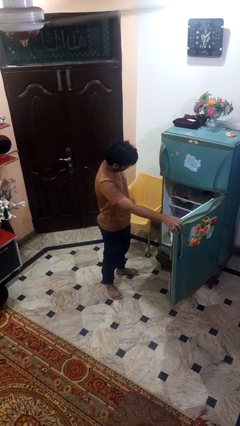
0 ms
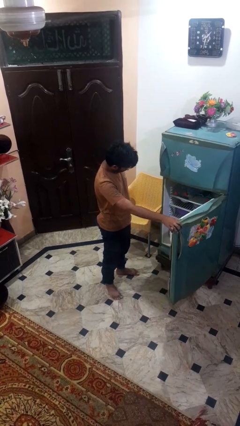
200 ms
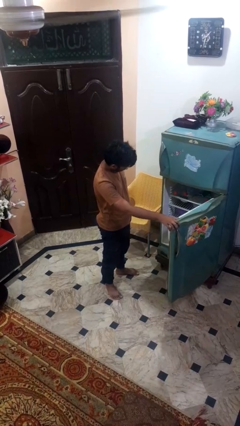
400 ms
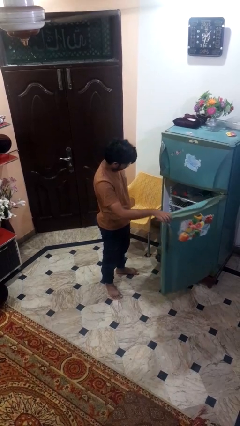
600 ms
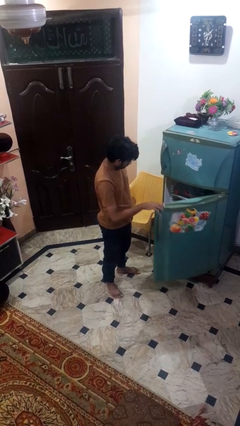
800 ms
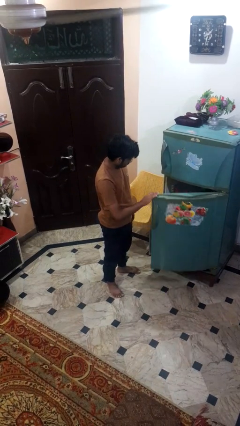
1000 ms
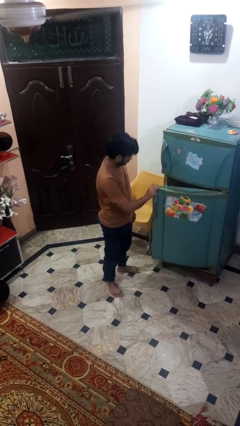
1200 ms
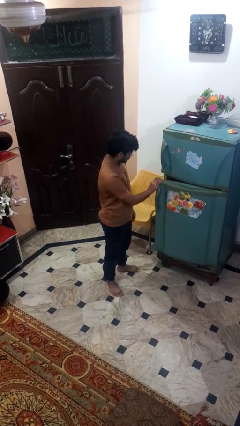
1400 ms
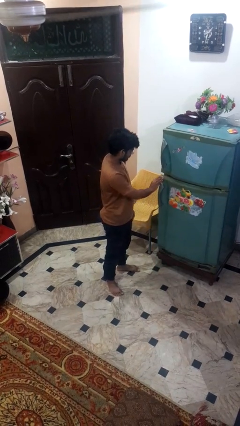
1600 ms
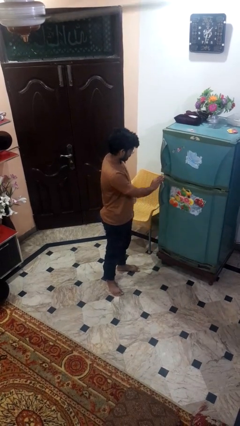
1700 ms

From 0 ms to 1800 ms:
person closes refrigerator

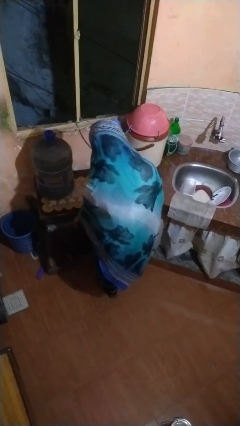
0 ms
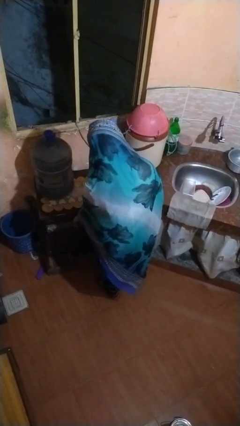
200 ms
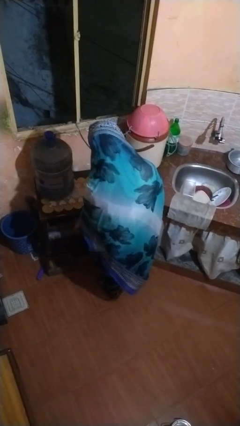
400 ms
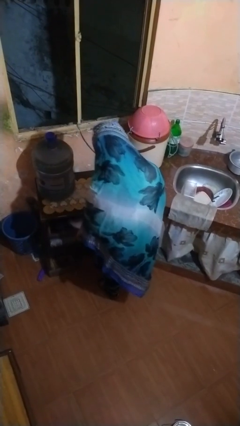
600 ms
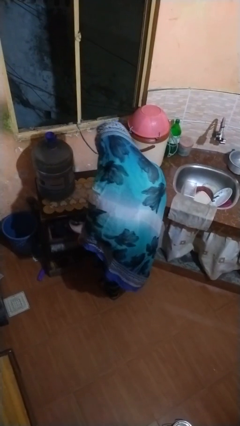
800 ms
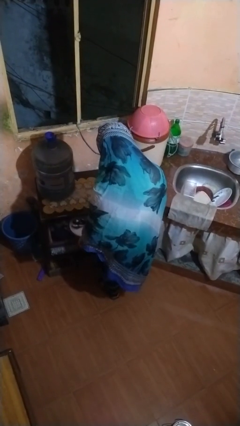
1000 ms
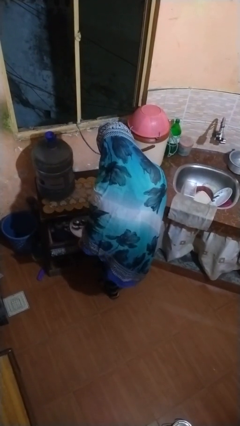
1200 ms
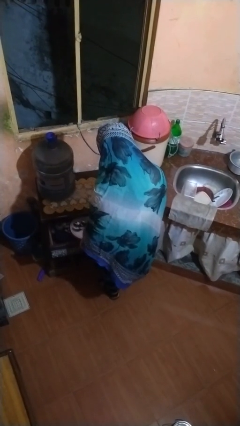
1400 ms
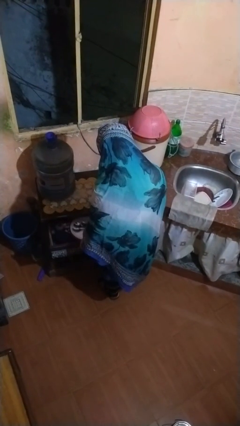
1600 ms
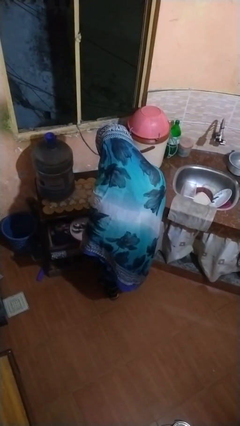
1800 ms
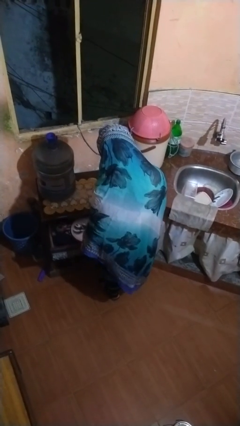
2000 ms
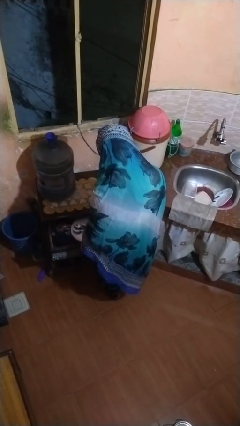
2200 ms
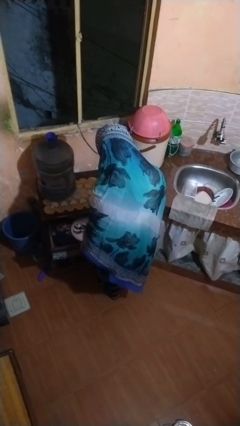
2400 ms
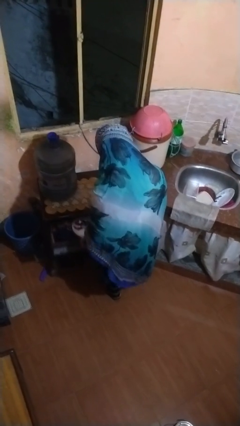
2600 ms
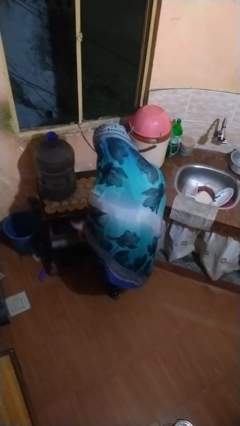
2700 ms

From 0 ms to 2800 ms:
person opens kitchen drawer

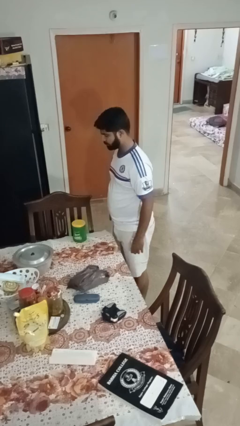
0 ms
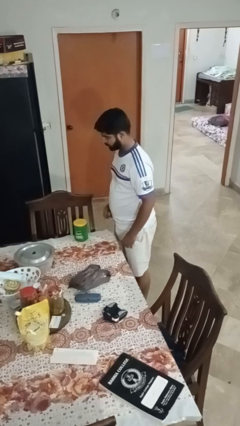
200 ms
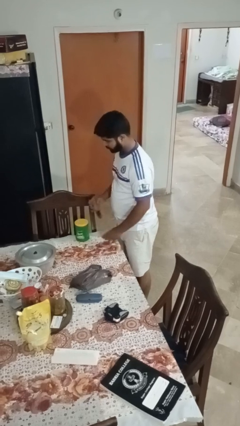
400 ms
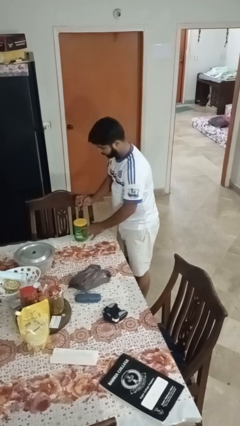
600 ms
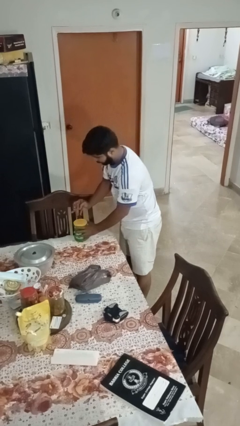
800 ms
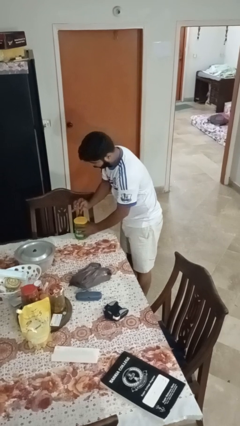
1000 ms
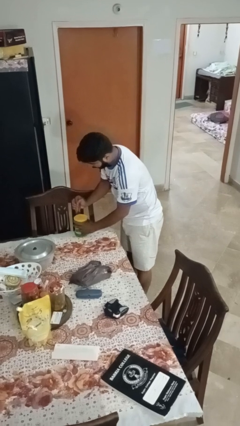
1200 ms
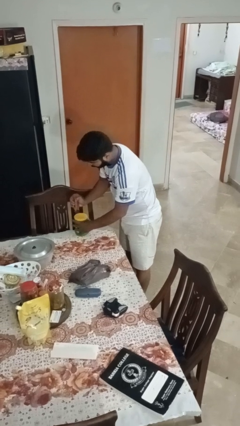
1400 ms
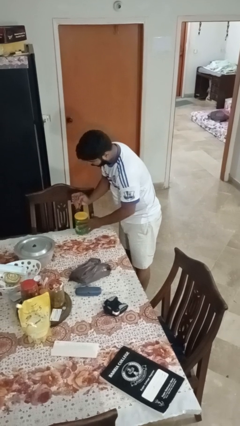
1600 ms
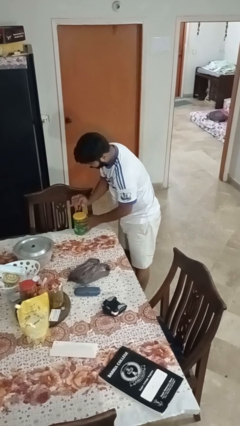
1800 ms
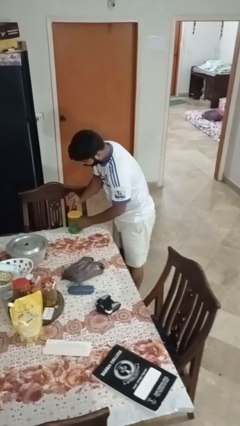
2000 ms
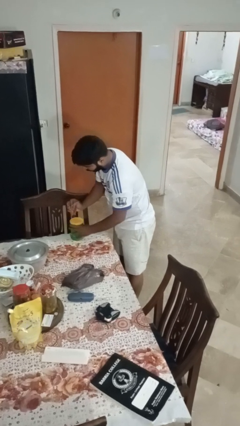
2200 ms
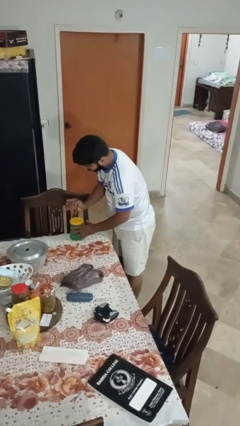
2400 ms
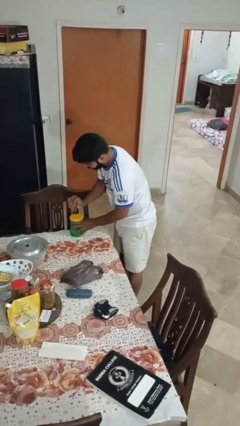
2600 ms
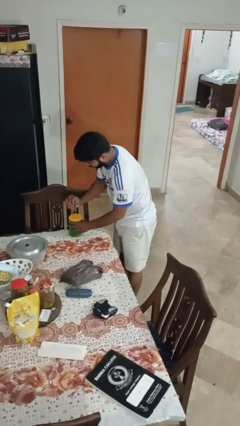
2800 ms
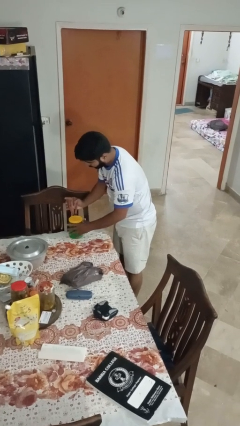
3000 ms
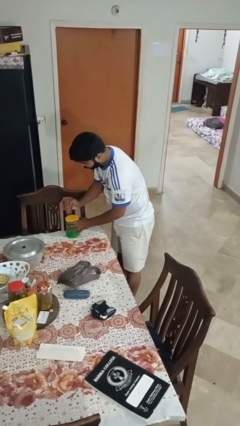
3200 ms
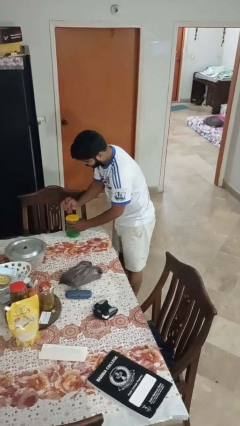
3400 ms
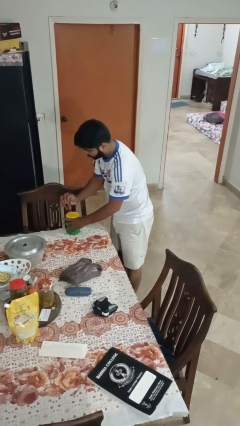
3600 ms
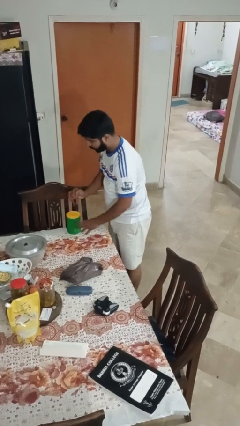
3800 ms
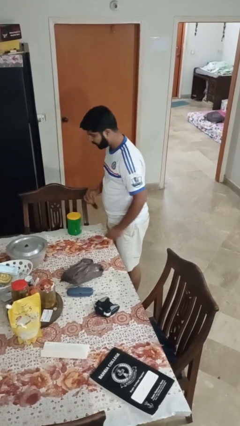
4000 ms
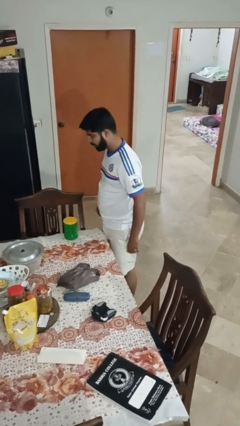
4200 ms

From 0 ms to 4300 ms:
person opens can with can opener

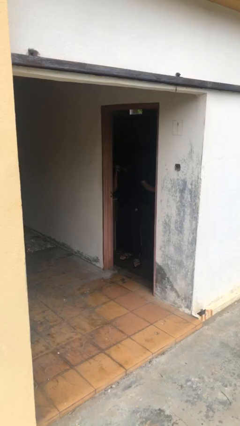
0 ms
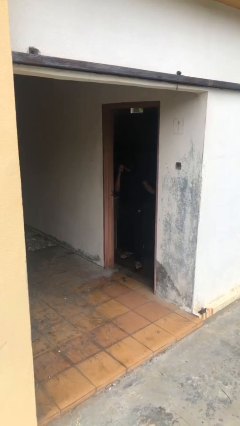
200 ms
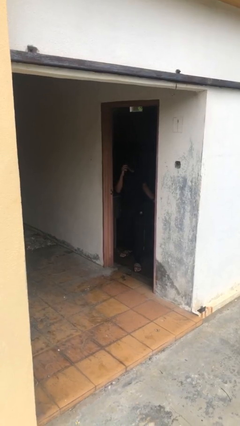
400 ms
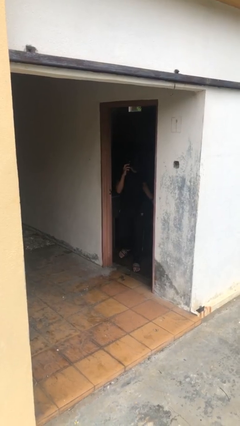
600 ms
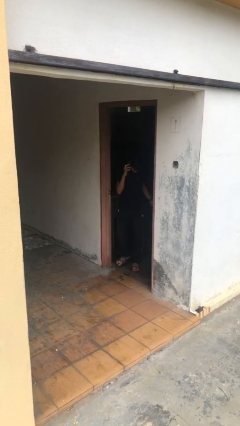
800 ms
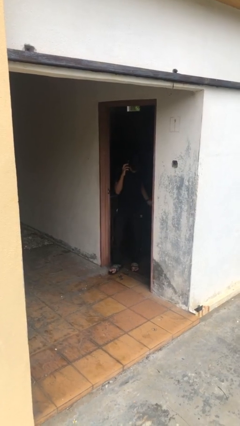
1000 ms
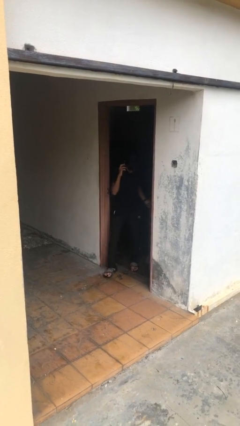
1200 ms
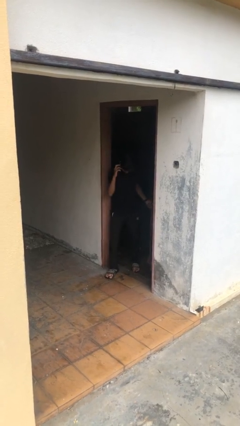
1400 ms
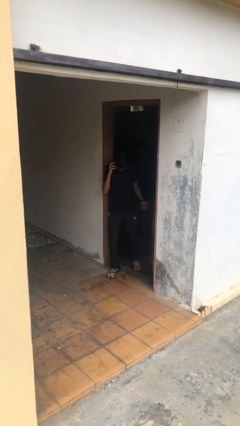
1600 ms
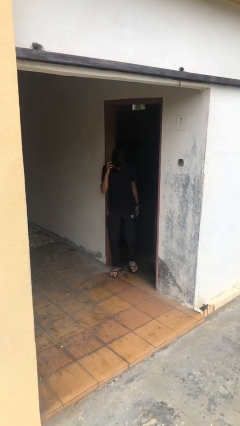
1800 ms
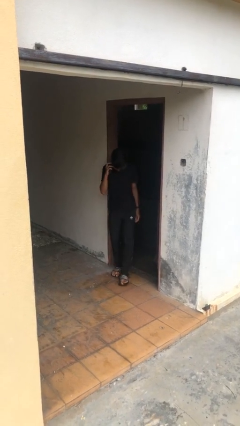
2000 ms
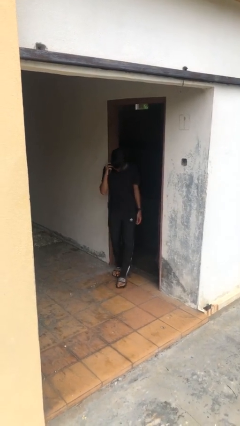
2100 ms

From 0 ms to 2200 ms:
person enters scene through structure

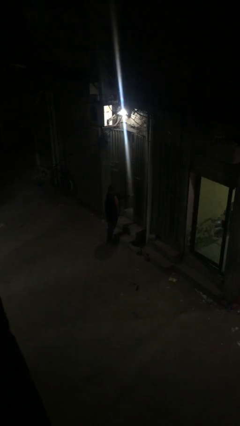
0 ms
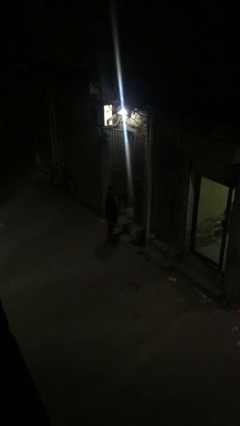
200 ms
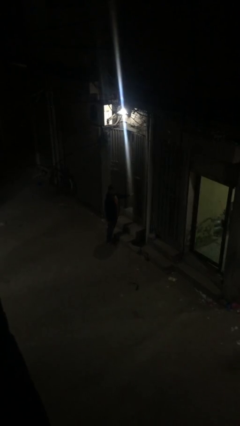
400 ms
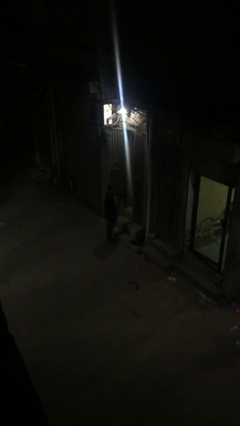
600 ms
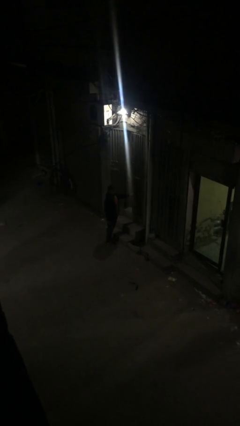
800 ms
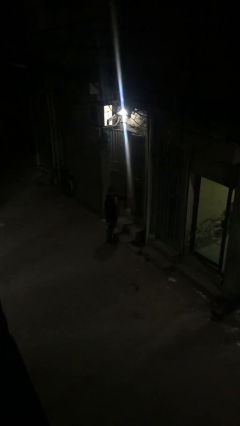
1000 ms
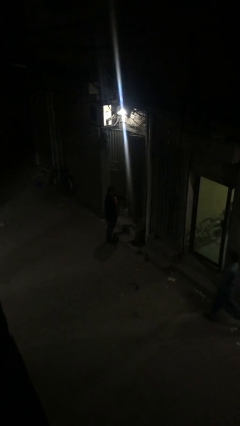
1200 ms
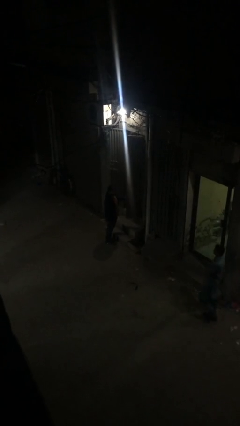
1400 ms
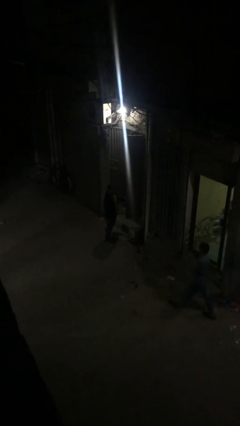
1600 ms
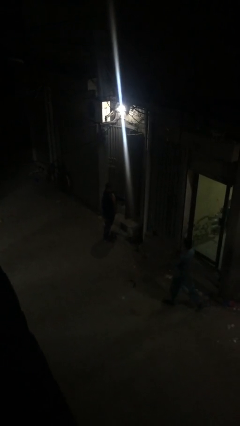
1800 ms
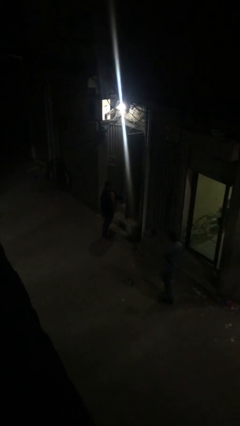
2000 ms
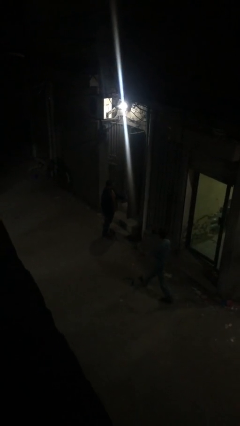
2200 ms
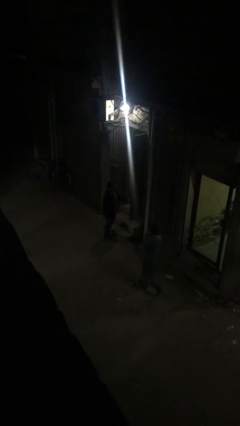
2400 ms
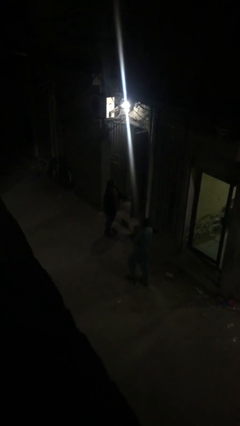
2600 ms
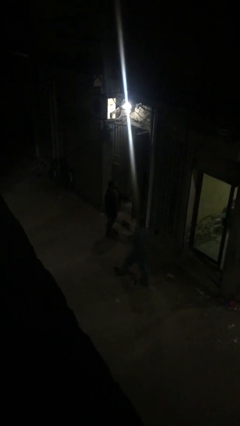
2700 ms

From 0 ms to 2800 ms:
person opens facility door

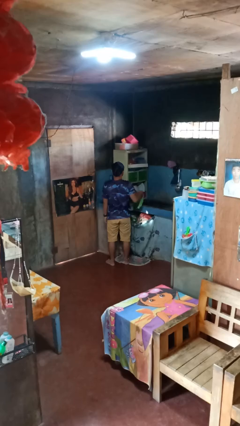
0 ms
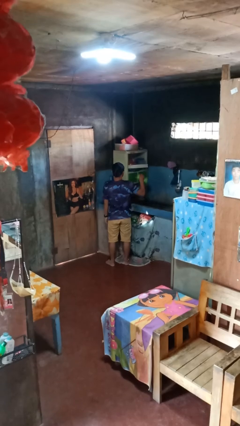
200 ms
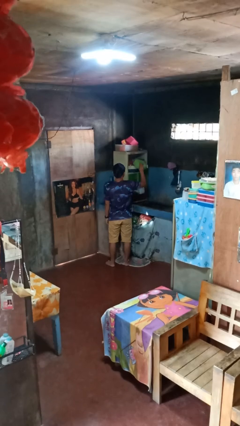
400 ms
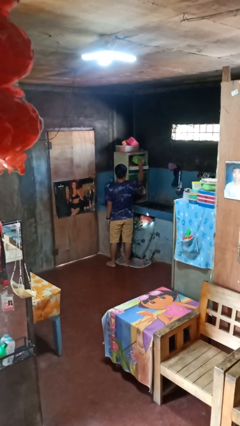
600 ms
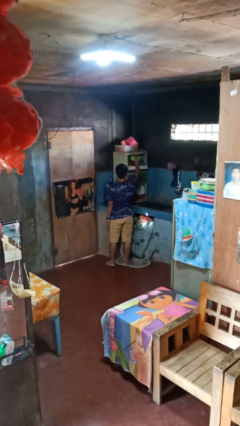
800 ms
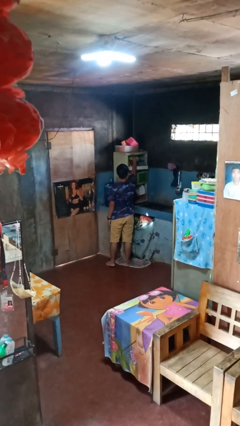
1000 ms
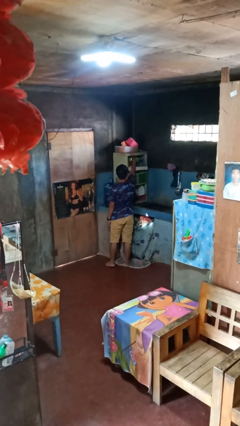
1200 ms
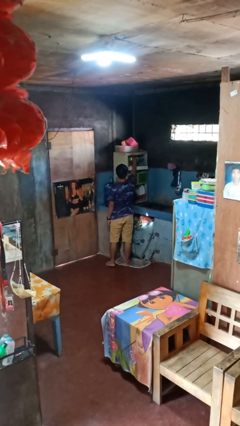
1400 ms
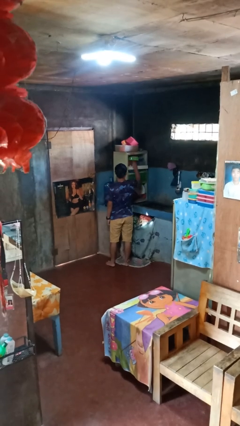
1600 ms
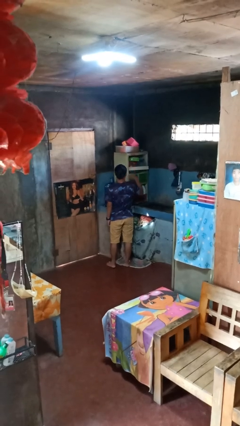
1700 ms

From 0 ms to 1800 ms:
person puts object in cabinet

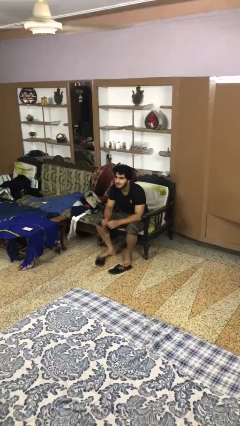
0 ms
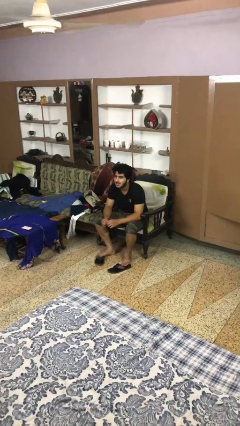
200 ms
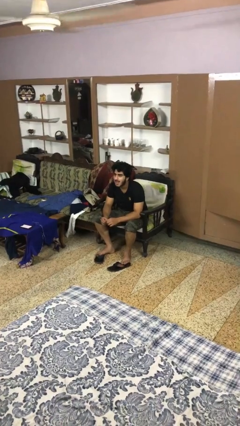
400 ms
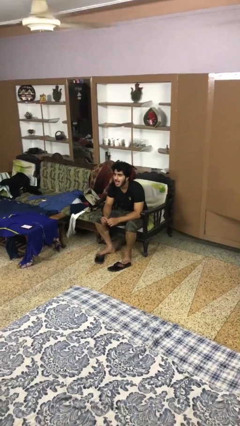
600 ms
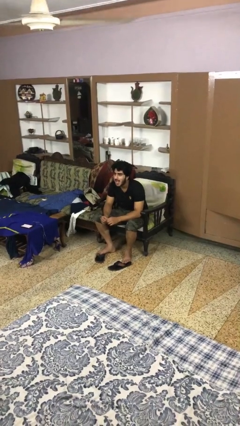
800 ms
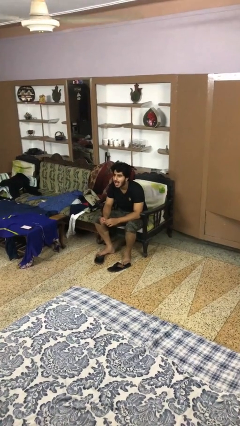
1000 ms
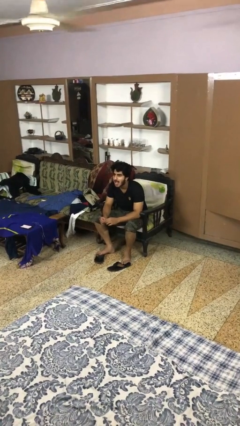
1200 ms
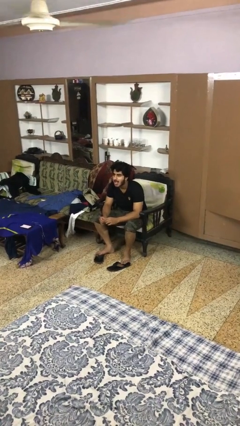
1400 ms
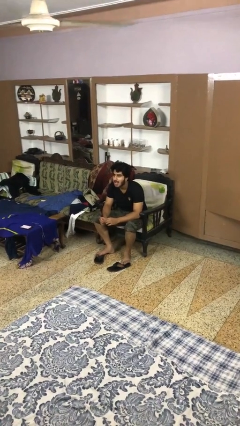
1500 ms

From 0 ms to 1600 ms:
person sticks out tongue
